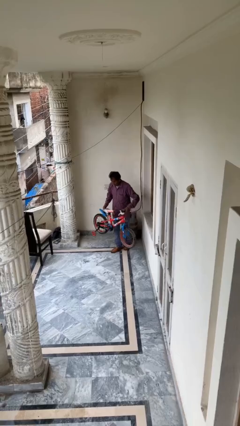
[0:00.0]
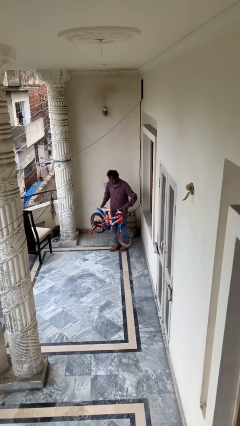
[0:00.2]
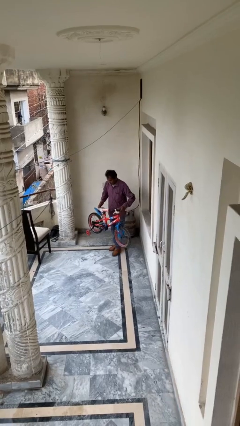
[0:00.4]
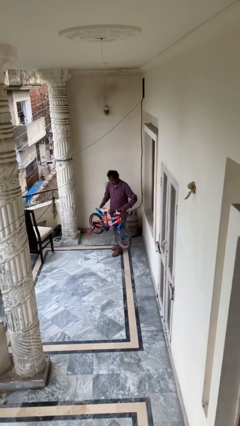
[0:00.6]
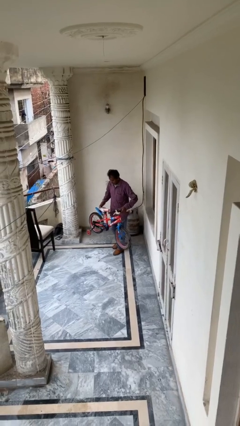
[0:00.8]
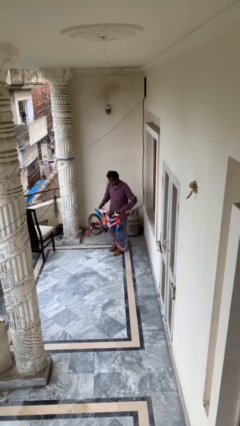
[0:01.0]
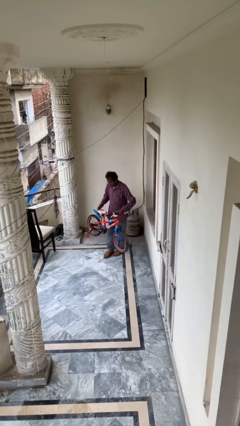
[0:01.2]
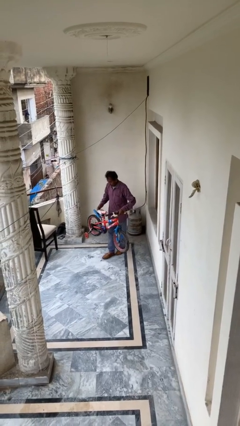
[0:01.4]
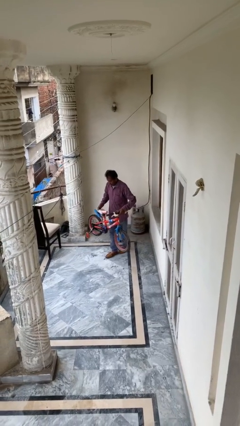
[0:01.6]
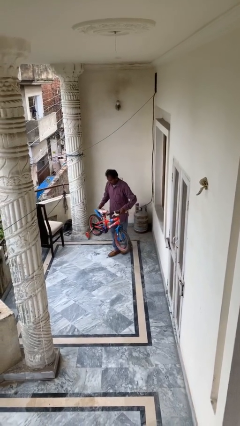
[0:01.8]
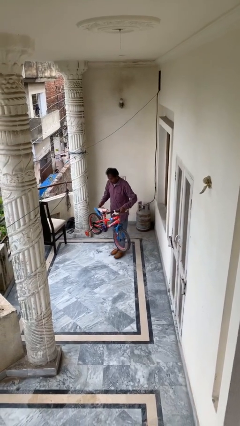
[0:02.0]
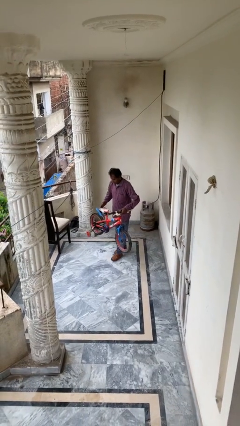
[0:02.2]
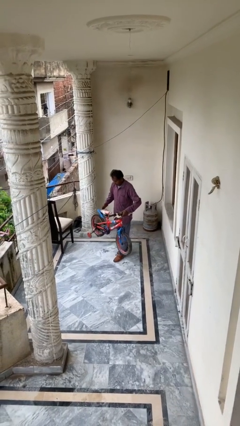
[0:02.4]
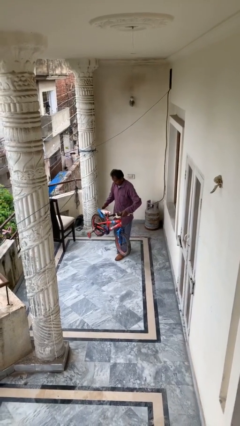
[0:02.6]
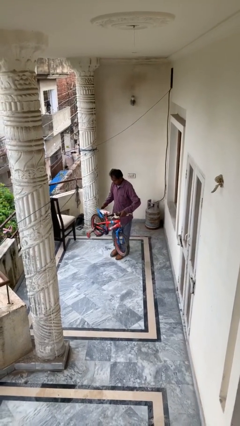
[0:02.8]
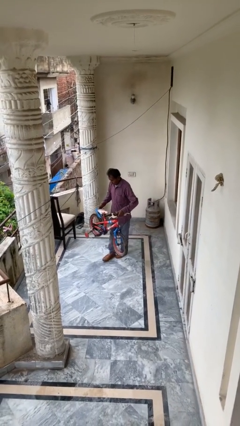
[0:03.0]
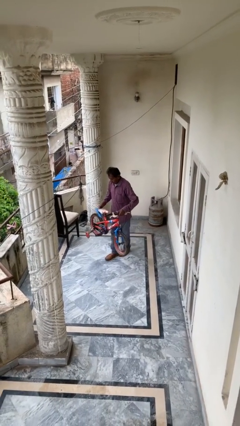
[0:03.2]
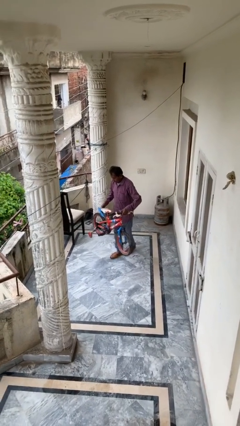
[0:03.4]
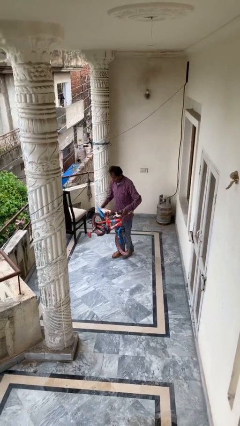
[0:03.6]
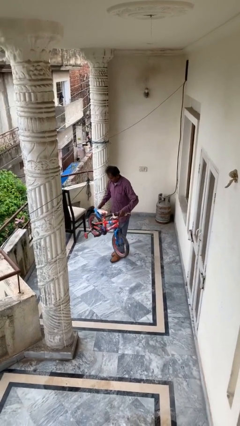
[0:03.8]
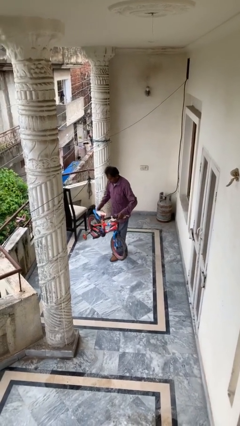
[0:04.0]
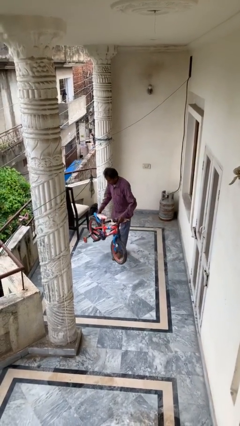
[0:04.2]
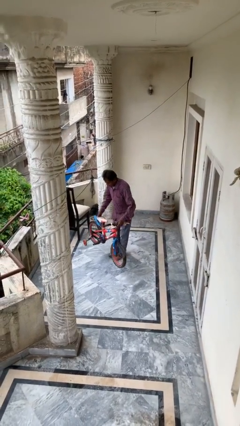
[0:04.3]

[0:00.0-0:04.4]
person carries heavy object

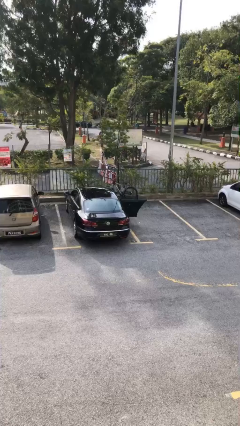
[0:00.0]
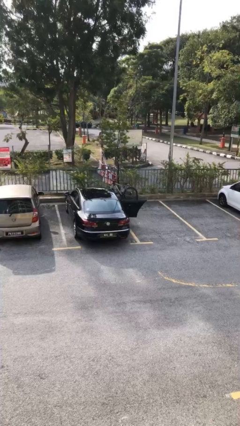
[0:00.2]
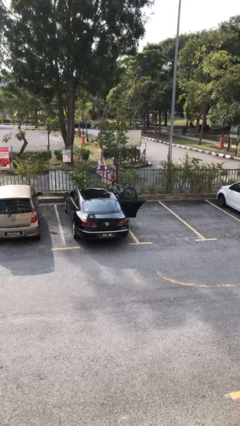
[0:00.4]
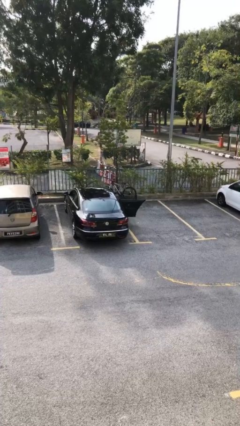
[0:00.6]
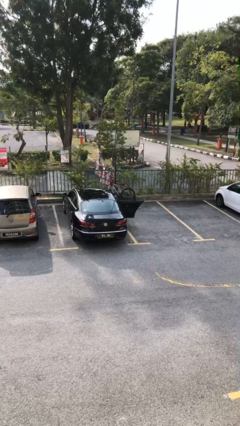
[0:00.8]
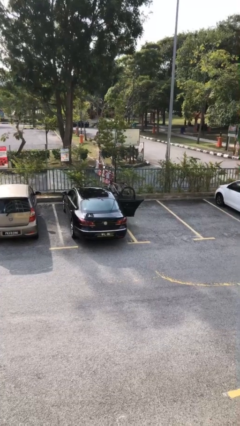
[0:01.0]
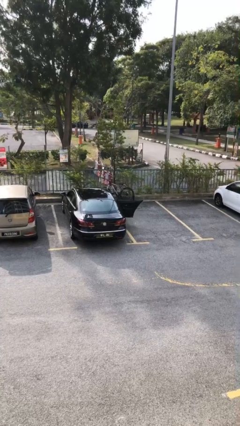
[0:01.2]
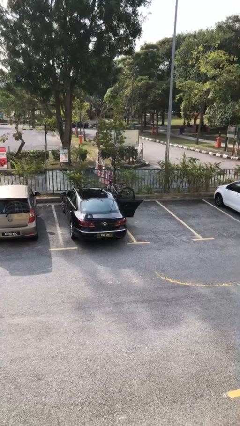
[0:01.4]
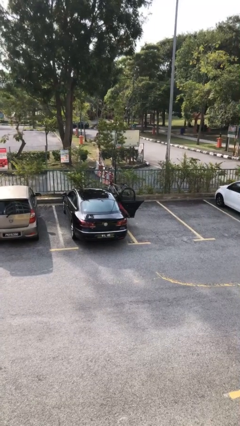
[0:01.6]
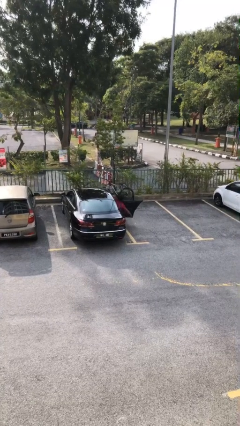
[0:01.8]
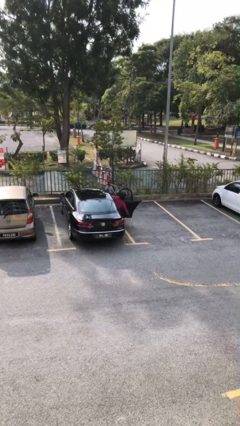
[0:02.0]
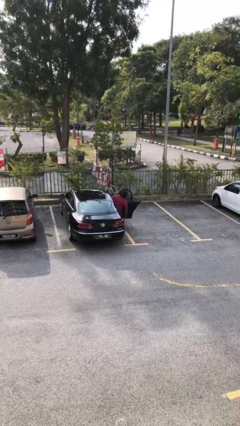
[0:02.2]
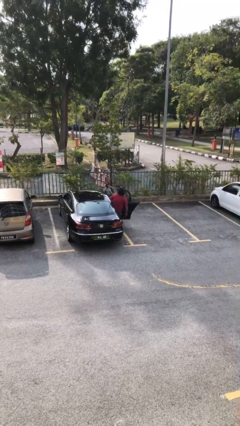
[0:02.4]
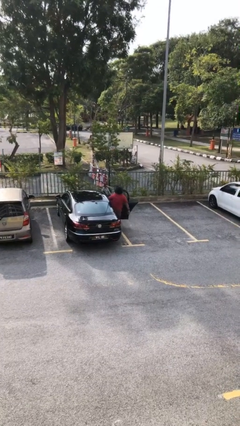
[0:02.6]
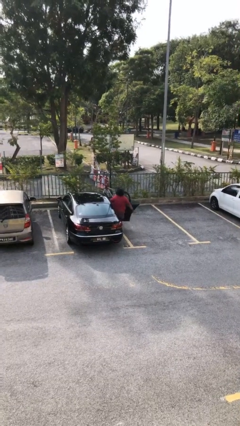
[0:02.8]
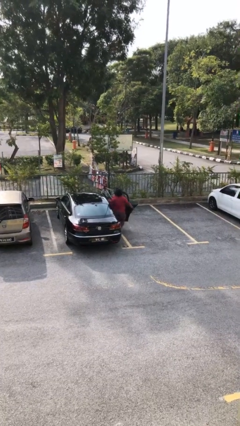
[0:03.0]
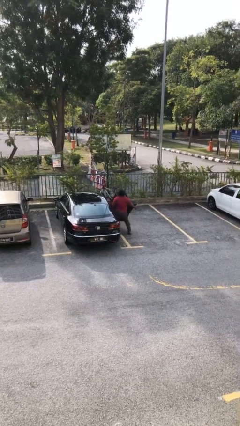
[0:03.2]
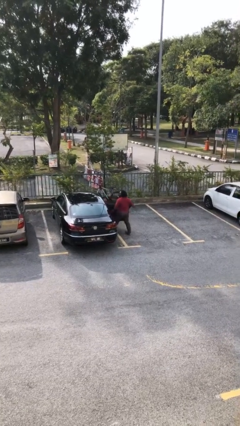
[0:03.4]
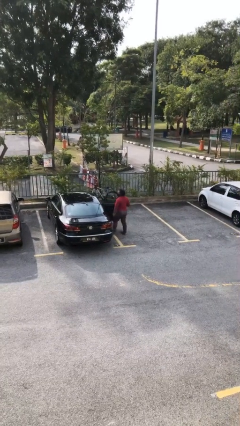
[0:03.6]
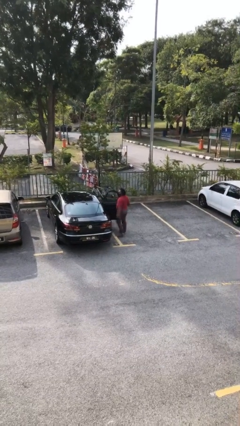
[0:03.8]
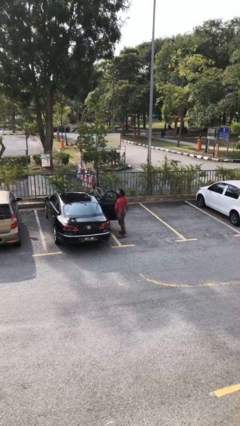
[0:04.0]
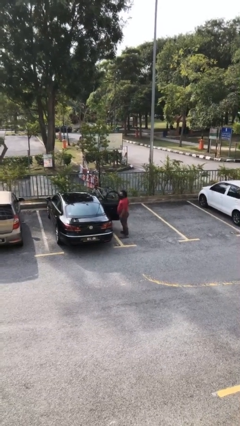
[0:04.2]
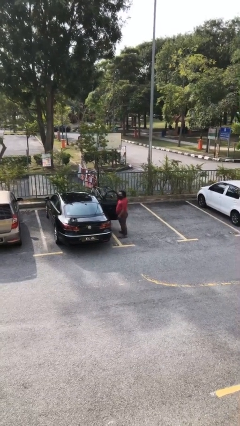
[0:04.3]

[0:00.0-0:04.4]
person exits car

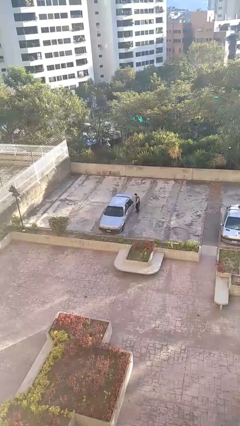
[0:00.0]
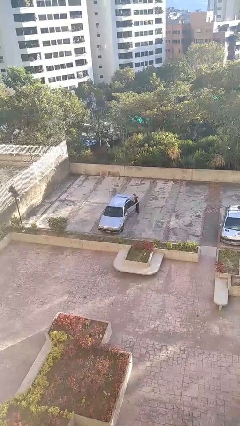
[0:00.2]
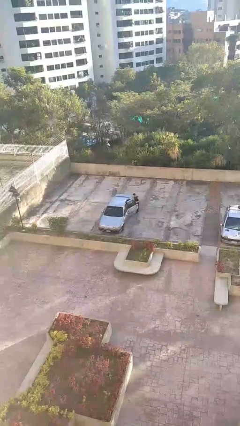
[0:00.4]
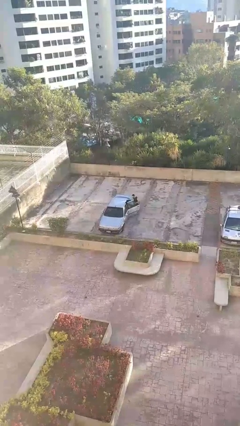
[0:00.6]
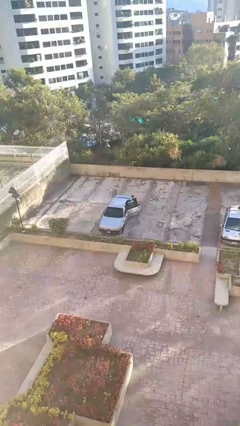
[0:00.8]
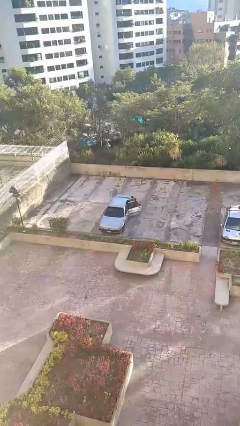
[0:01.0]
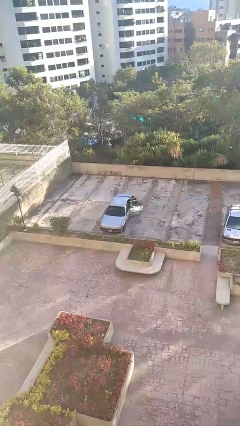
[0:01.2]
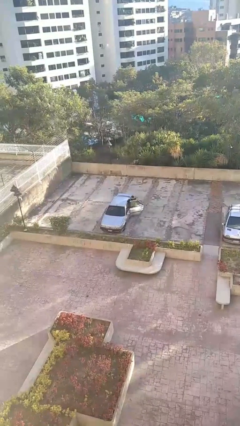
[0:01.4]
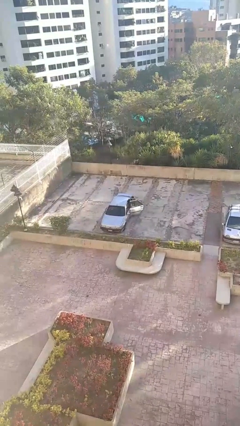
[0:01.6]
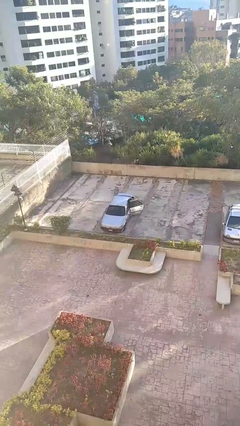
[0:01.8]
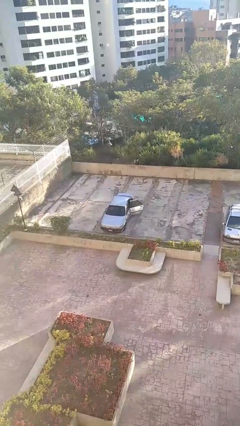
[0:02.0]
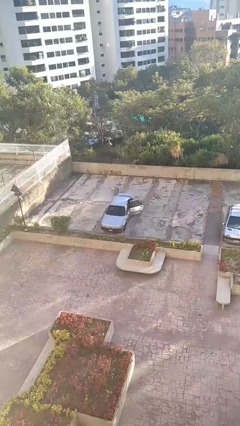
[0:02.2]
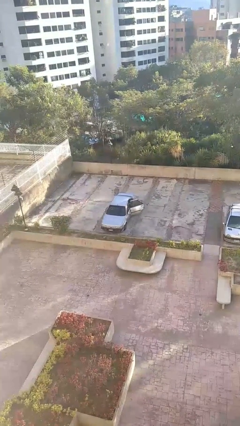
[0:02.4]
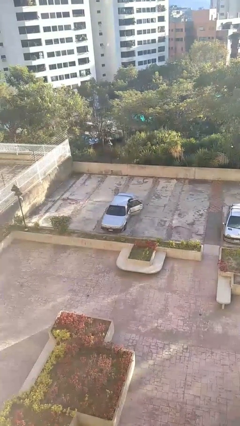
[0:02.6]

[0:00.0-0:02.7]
car picks up person

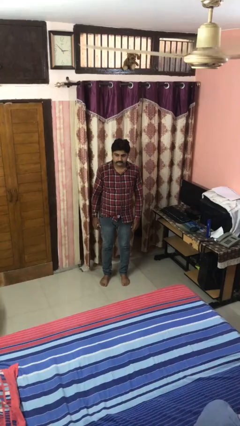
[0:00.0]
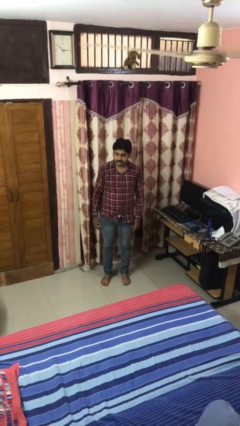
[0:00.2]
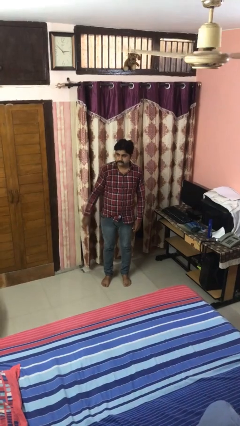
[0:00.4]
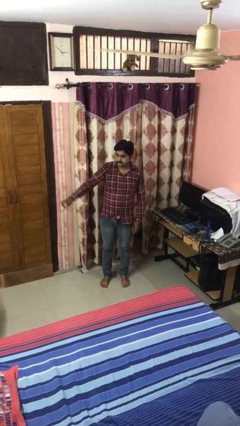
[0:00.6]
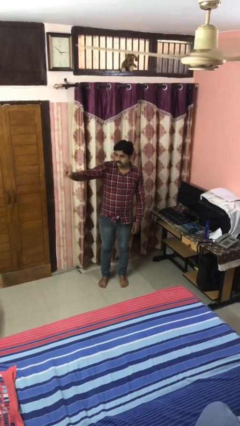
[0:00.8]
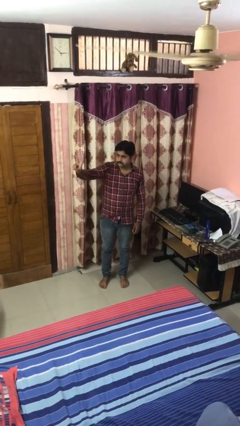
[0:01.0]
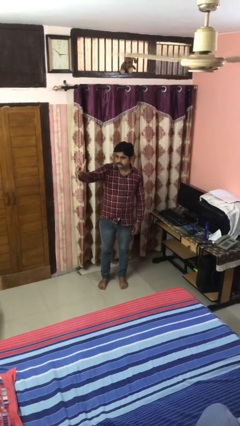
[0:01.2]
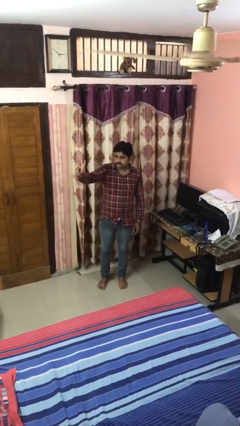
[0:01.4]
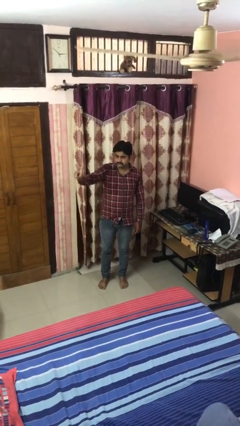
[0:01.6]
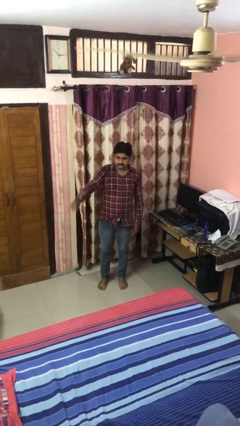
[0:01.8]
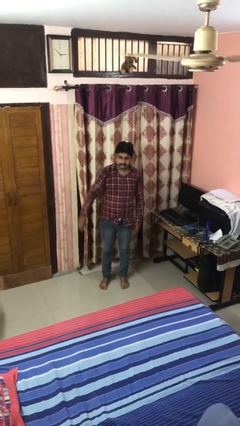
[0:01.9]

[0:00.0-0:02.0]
person gestures peace

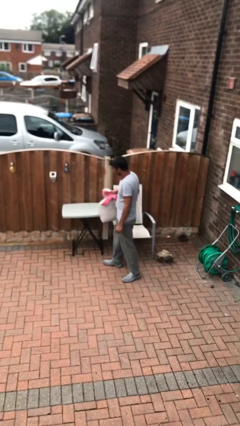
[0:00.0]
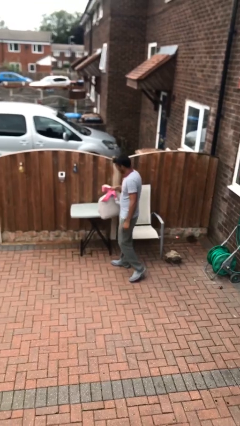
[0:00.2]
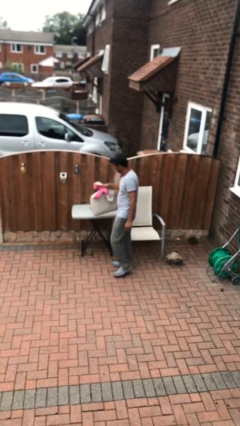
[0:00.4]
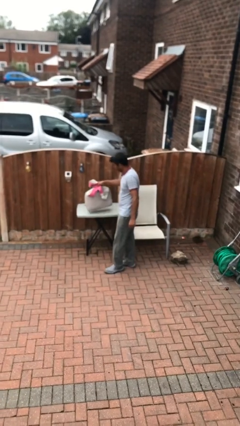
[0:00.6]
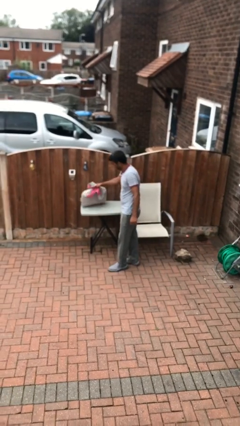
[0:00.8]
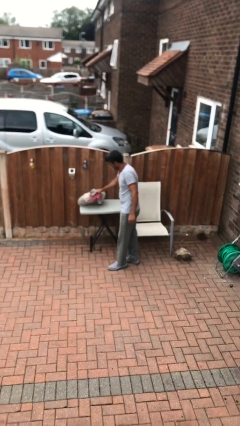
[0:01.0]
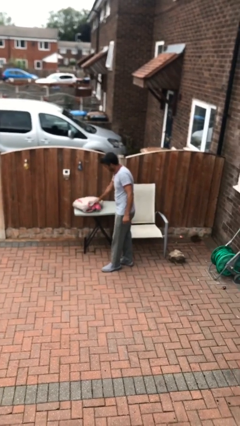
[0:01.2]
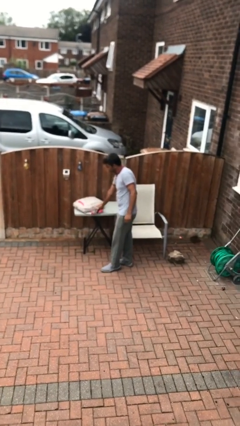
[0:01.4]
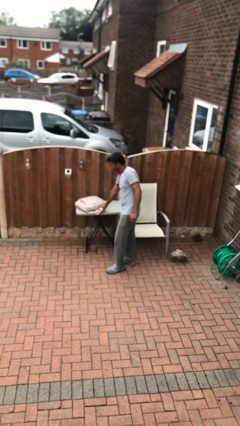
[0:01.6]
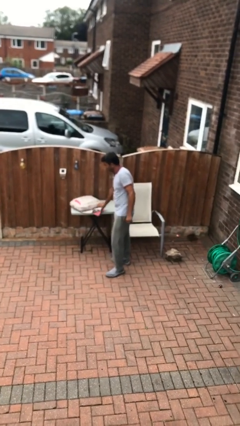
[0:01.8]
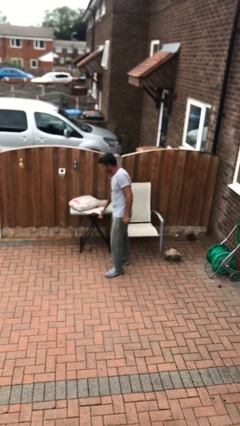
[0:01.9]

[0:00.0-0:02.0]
person puts down object on table

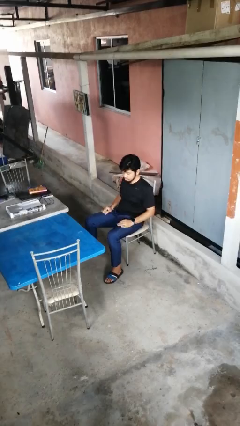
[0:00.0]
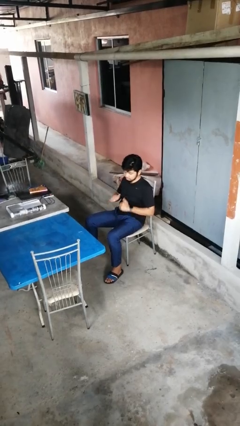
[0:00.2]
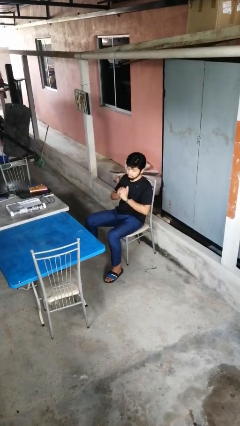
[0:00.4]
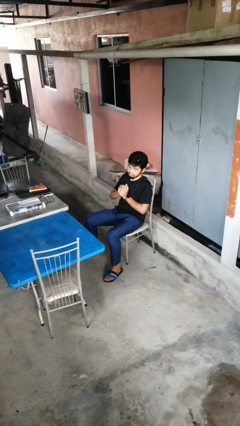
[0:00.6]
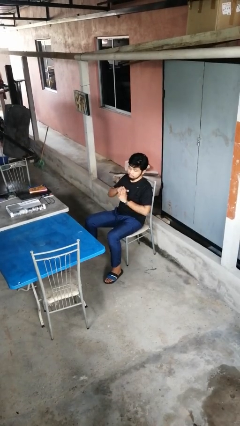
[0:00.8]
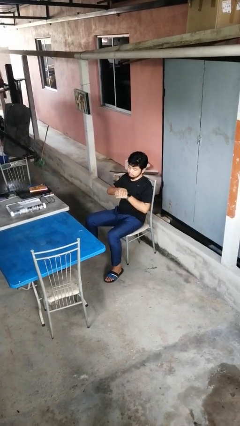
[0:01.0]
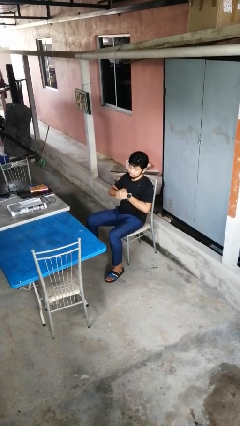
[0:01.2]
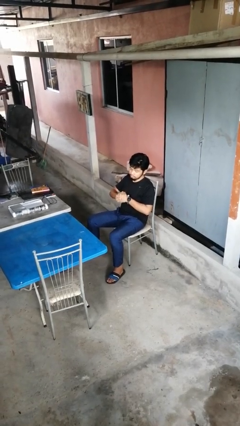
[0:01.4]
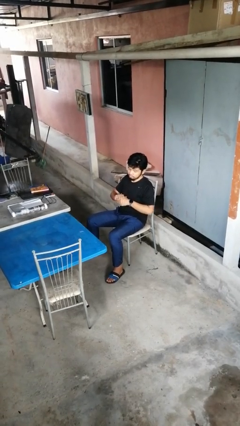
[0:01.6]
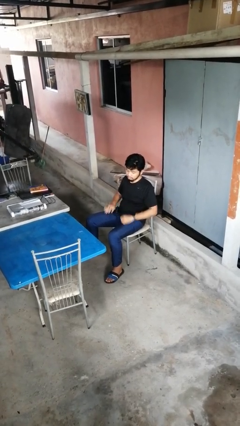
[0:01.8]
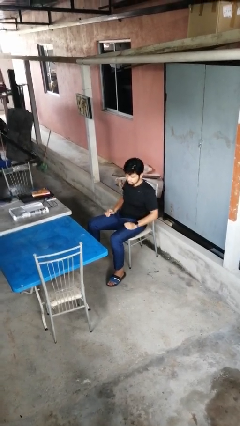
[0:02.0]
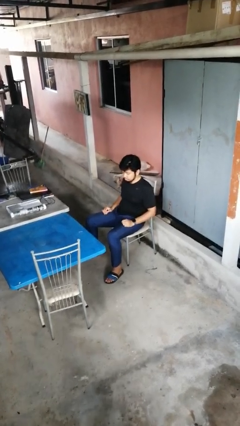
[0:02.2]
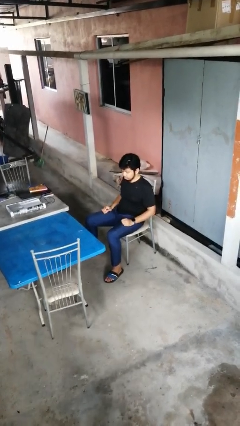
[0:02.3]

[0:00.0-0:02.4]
person cracks knuckles
